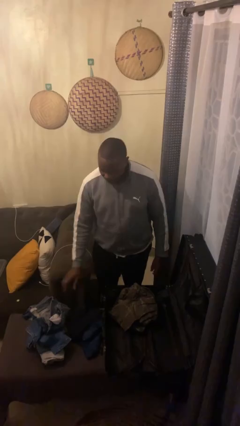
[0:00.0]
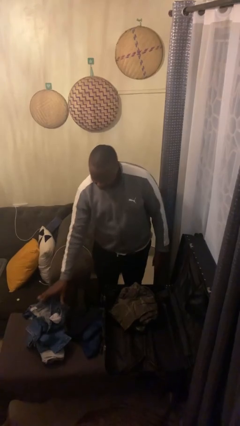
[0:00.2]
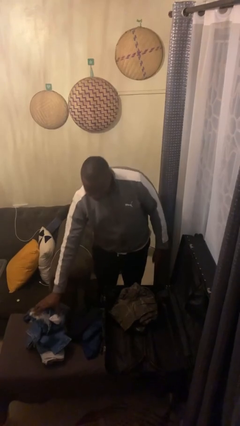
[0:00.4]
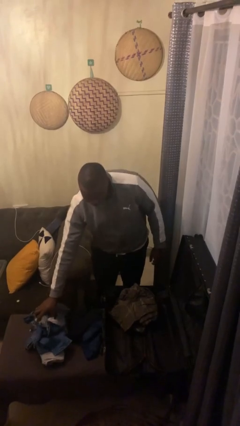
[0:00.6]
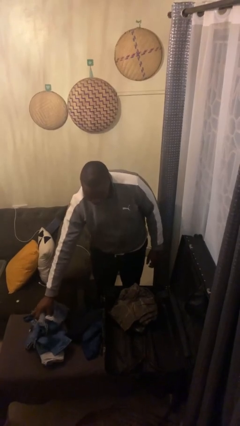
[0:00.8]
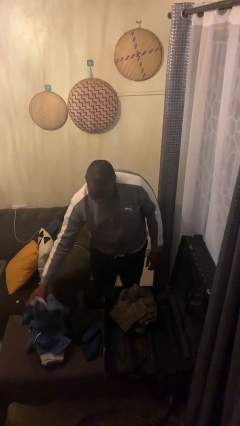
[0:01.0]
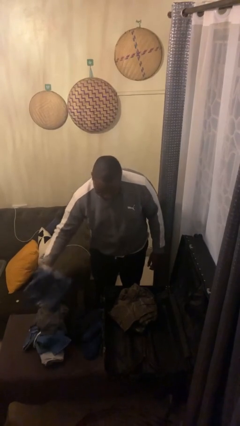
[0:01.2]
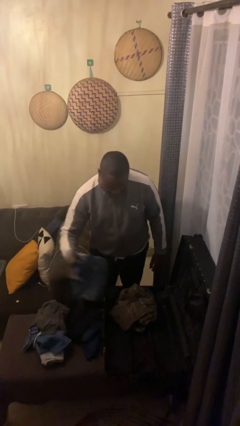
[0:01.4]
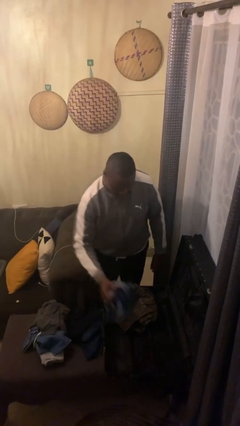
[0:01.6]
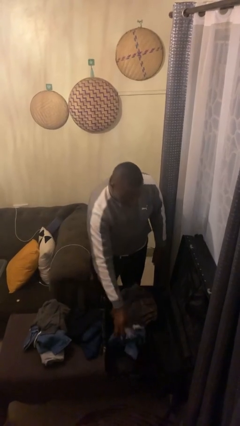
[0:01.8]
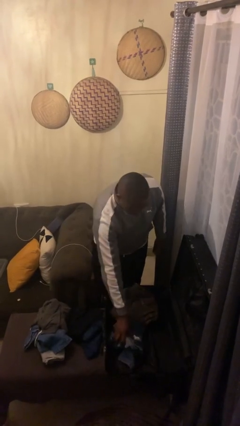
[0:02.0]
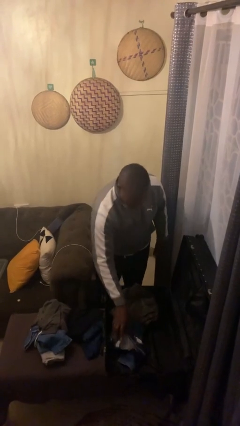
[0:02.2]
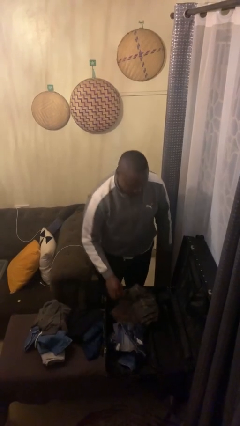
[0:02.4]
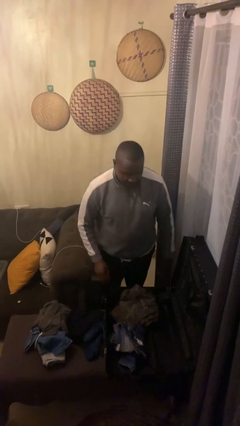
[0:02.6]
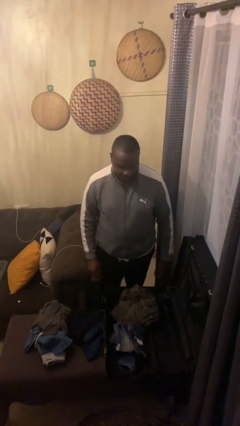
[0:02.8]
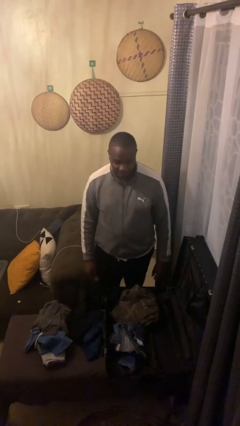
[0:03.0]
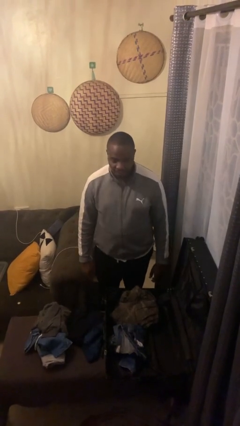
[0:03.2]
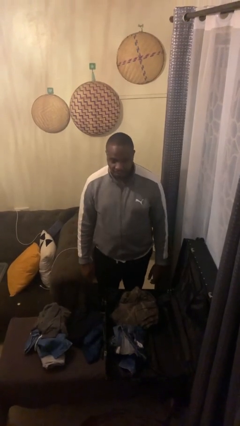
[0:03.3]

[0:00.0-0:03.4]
person loads clothes into suitcase

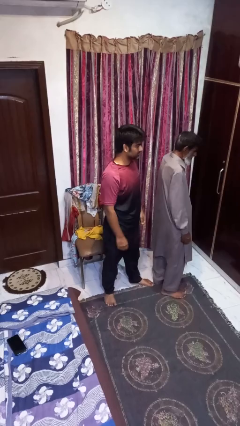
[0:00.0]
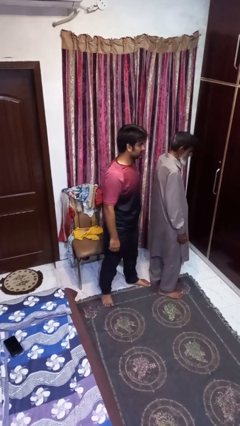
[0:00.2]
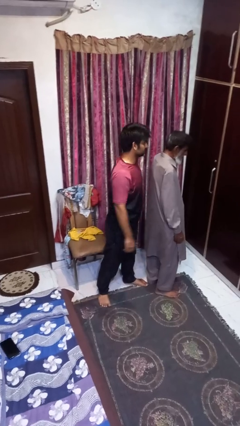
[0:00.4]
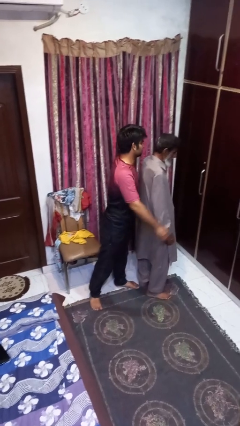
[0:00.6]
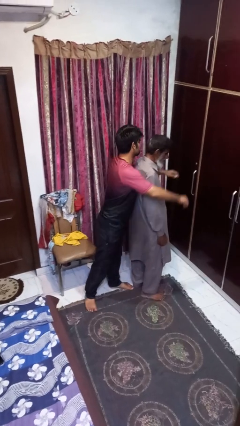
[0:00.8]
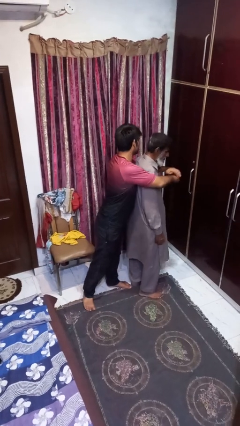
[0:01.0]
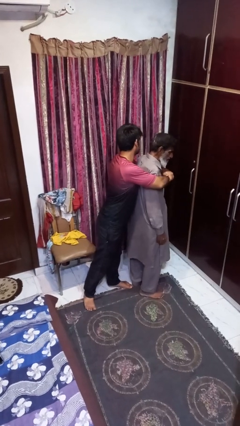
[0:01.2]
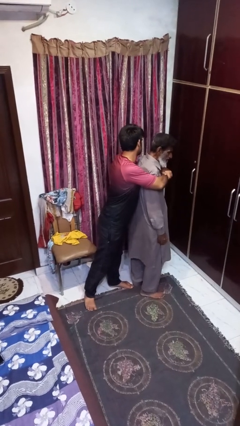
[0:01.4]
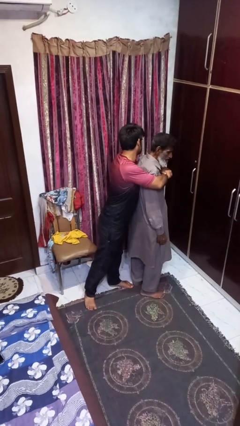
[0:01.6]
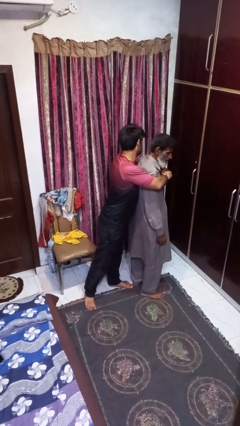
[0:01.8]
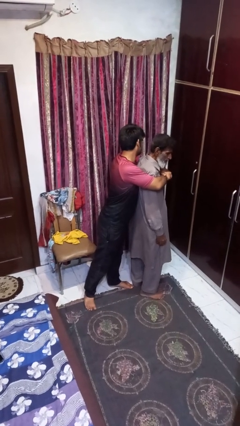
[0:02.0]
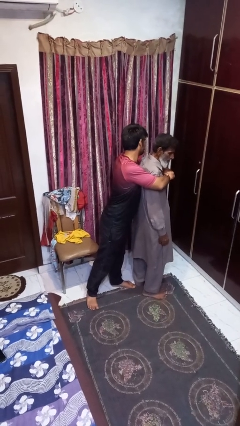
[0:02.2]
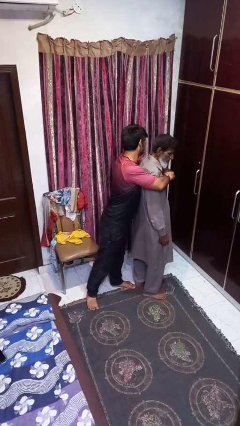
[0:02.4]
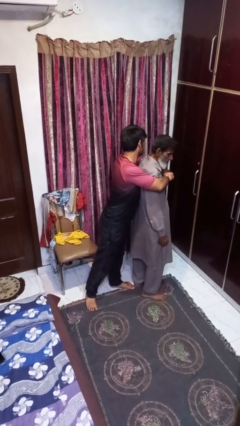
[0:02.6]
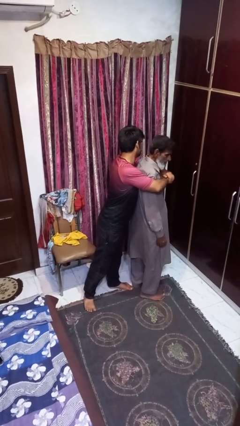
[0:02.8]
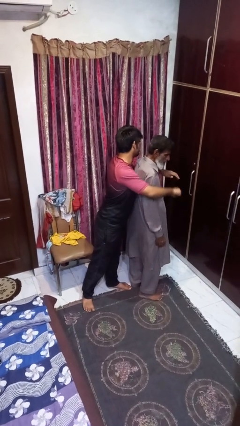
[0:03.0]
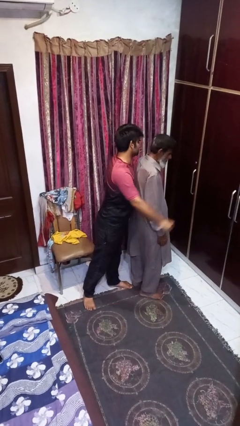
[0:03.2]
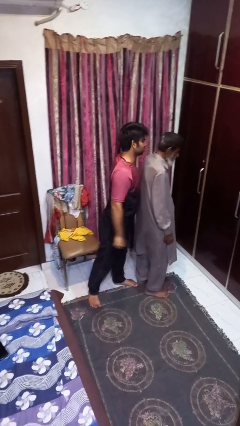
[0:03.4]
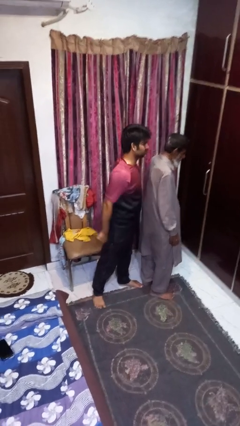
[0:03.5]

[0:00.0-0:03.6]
person hugs person from behind

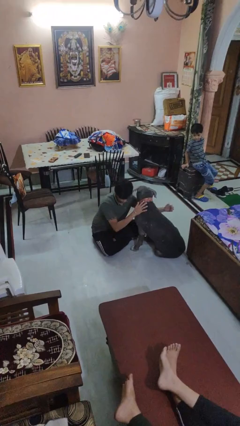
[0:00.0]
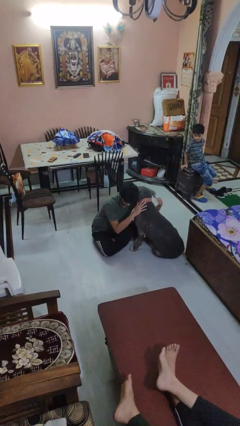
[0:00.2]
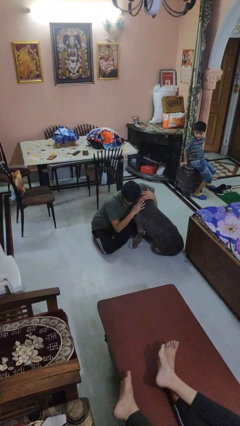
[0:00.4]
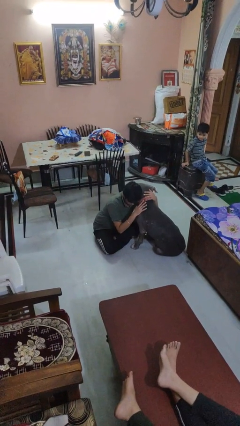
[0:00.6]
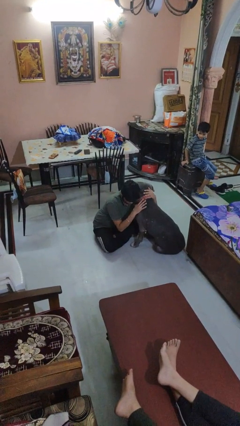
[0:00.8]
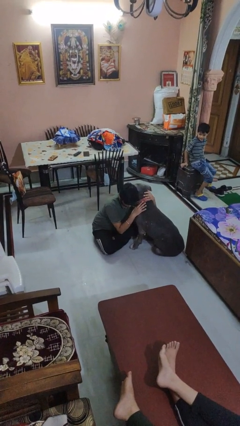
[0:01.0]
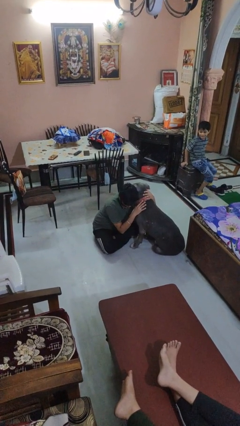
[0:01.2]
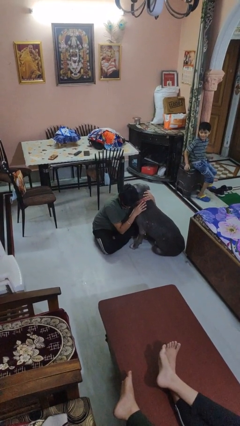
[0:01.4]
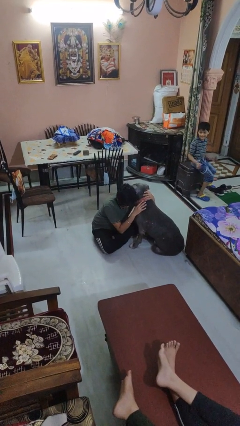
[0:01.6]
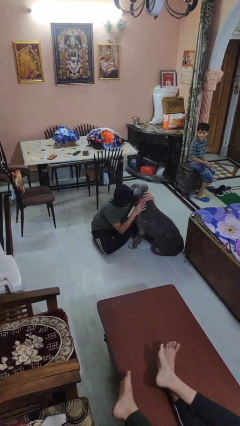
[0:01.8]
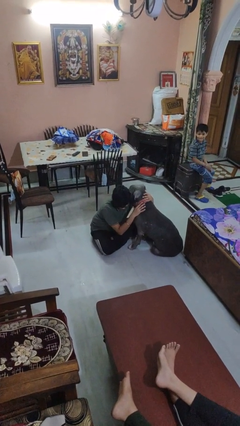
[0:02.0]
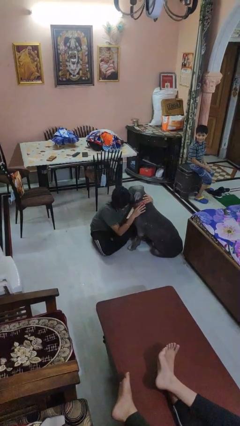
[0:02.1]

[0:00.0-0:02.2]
person hugs dog

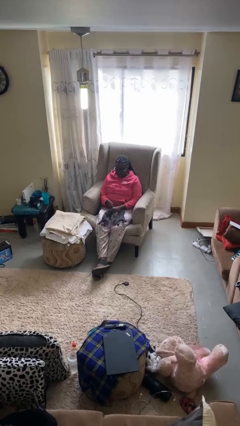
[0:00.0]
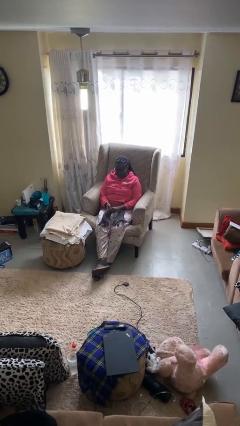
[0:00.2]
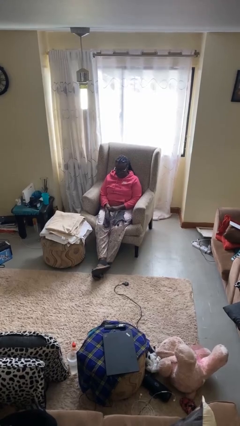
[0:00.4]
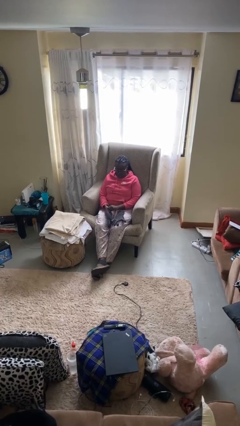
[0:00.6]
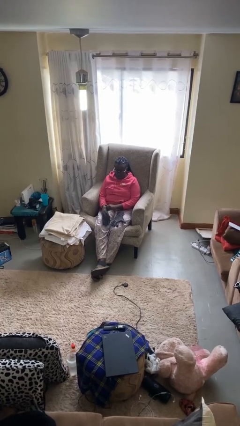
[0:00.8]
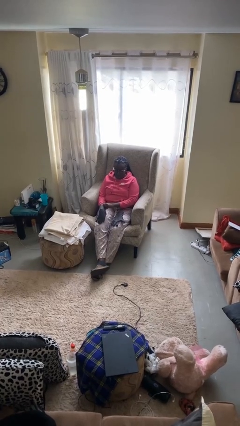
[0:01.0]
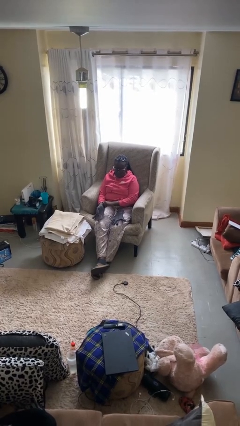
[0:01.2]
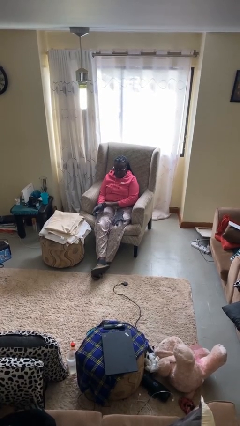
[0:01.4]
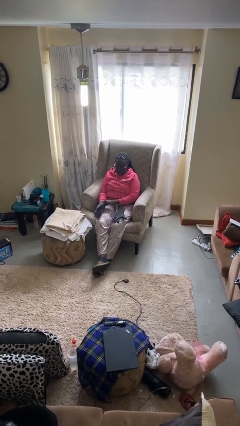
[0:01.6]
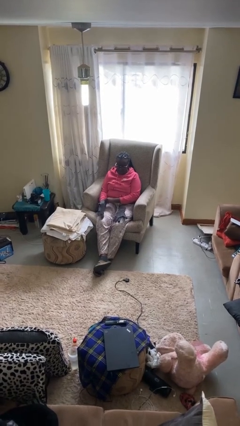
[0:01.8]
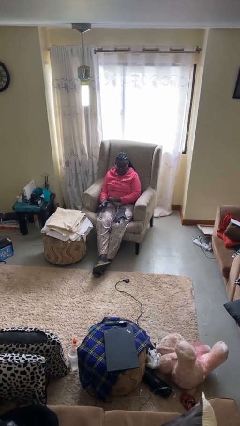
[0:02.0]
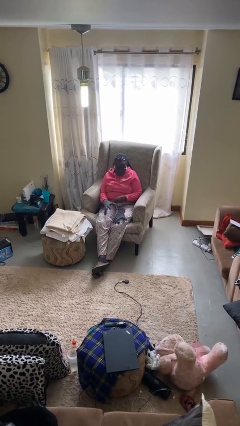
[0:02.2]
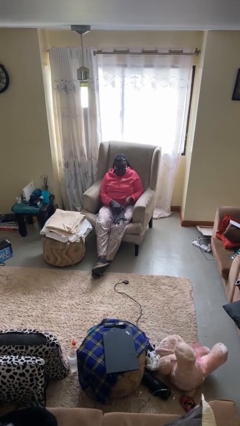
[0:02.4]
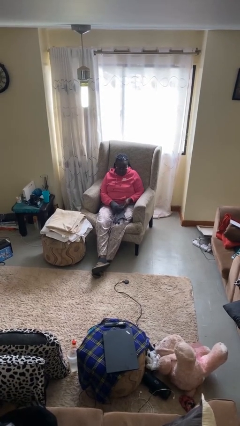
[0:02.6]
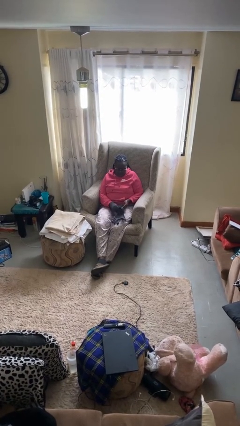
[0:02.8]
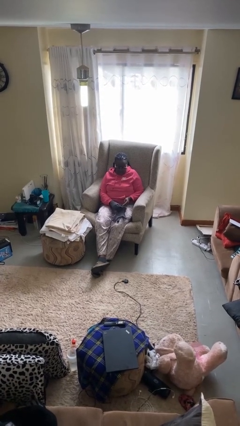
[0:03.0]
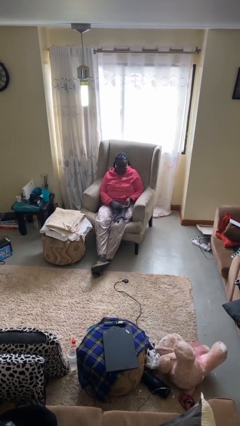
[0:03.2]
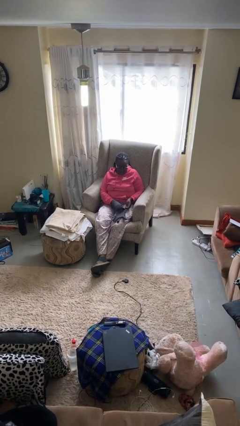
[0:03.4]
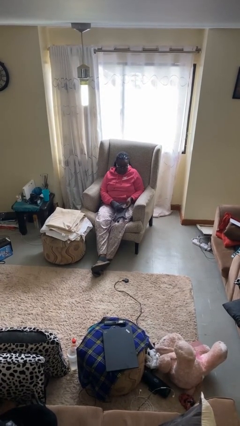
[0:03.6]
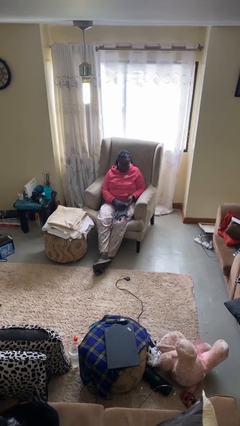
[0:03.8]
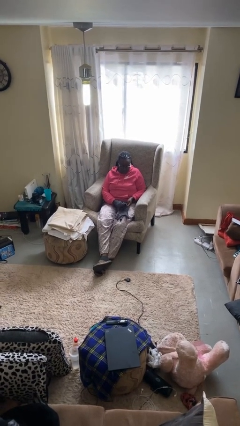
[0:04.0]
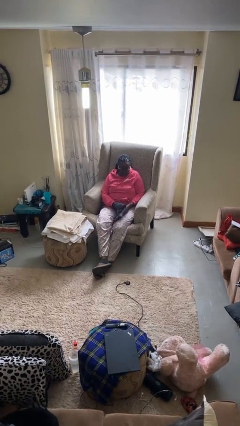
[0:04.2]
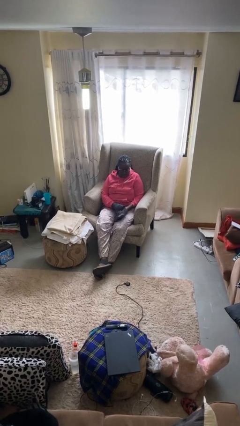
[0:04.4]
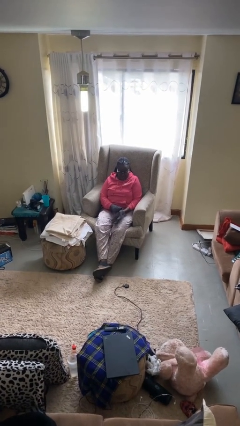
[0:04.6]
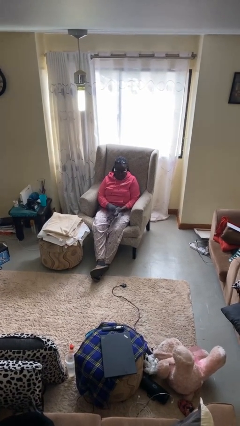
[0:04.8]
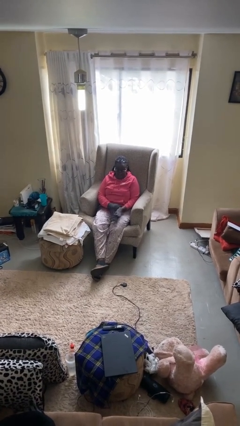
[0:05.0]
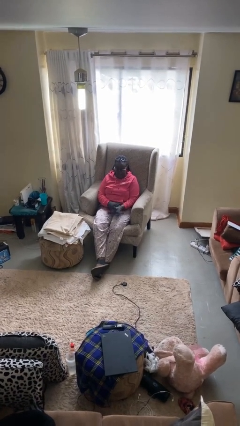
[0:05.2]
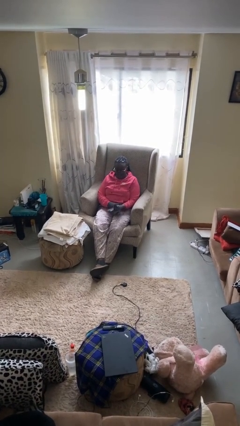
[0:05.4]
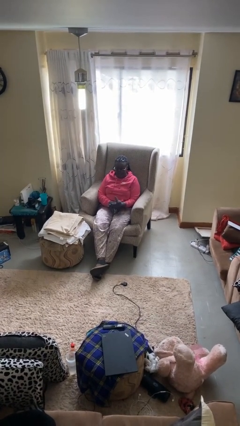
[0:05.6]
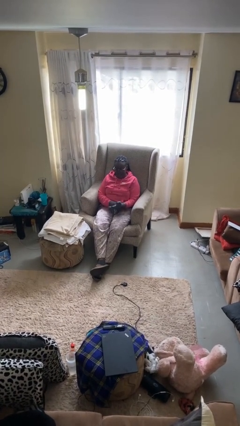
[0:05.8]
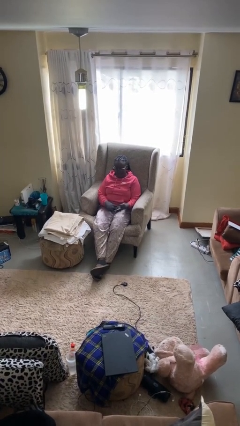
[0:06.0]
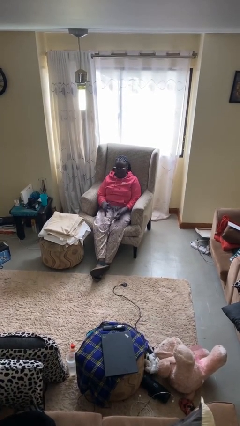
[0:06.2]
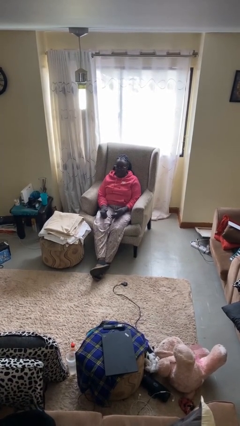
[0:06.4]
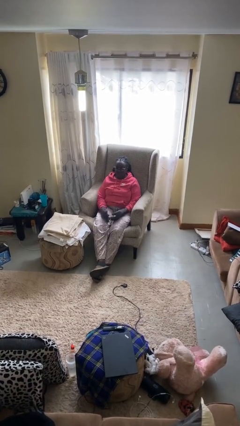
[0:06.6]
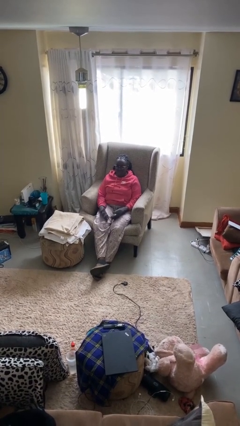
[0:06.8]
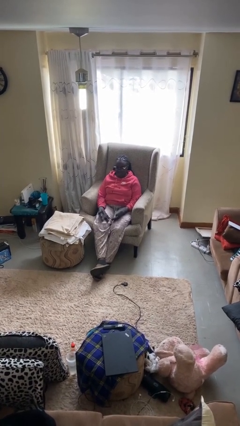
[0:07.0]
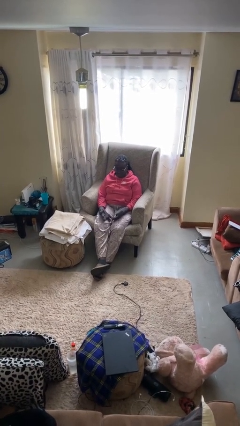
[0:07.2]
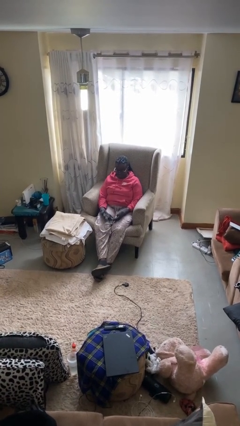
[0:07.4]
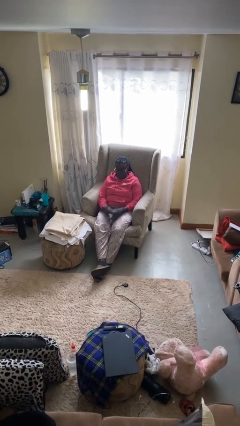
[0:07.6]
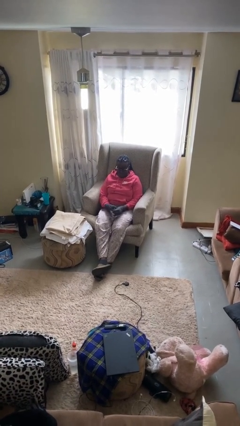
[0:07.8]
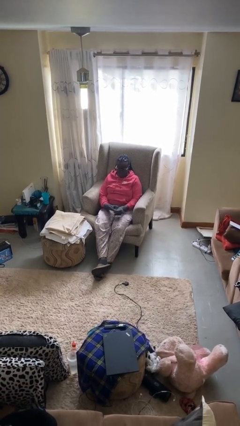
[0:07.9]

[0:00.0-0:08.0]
person puts on gloves

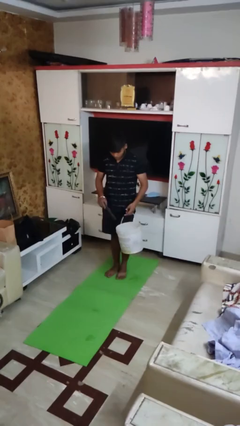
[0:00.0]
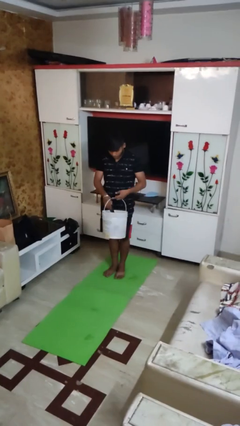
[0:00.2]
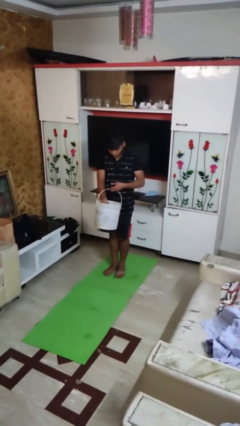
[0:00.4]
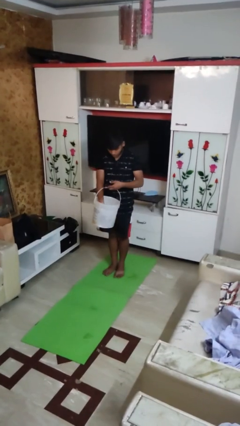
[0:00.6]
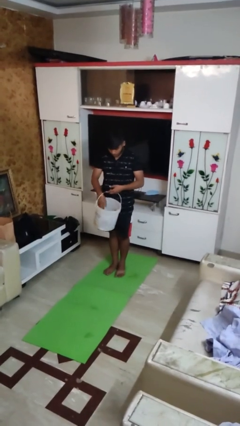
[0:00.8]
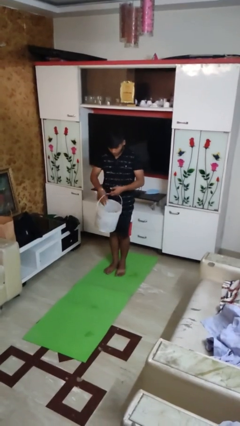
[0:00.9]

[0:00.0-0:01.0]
person puts object into basket
